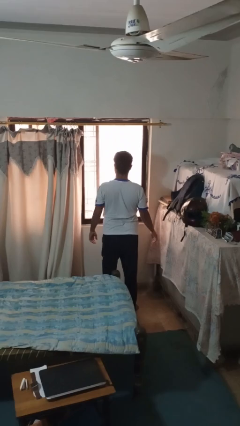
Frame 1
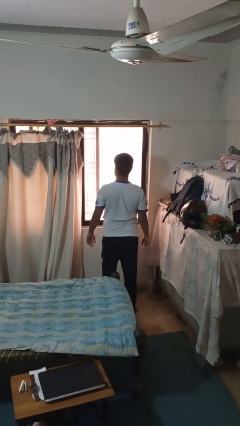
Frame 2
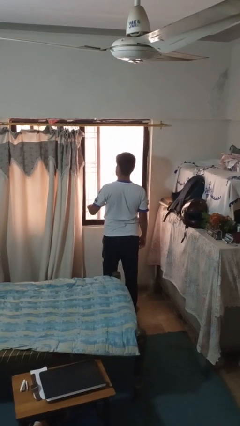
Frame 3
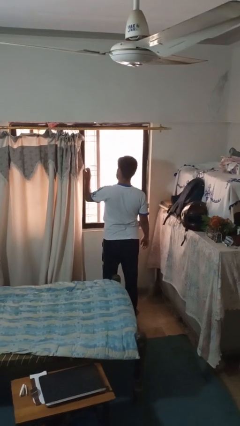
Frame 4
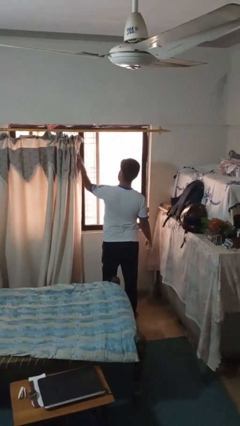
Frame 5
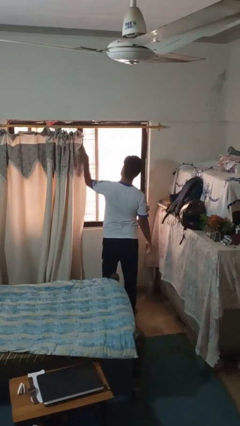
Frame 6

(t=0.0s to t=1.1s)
person closes curtains

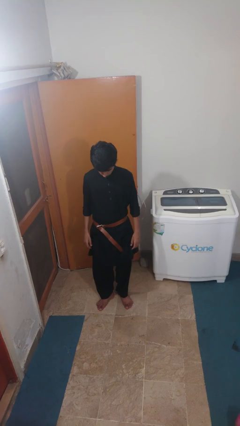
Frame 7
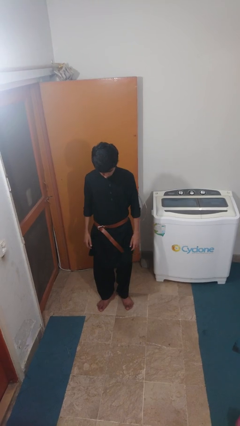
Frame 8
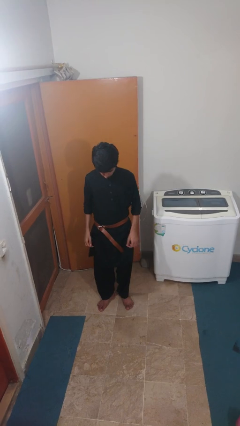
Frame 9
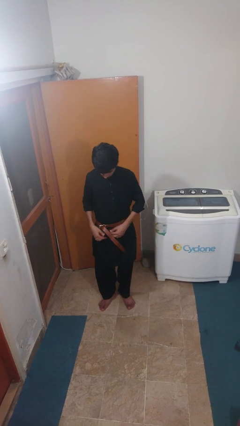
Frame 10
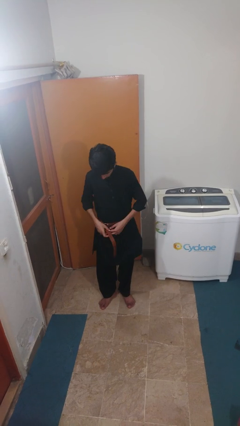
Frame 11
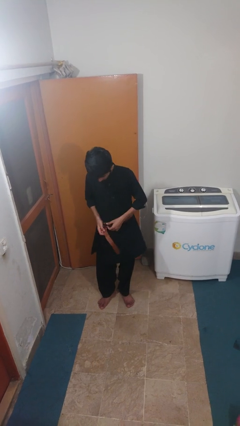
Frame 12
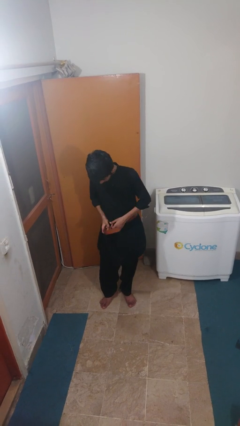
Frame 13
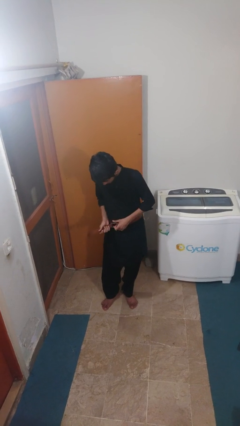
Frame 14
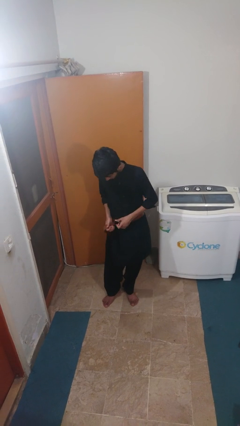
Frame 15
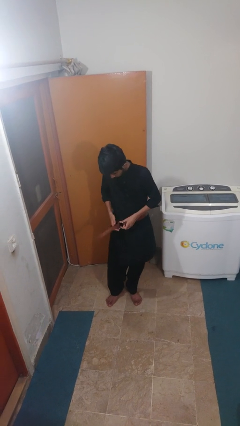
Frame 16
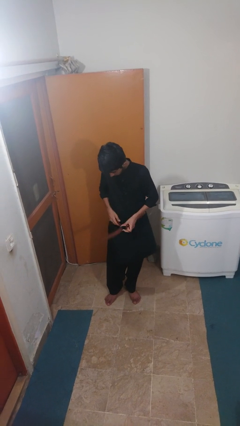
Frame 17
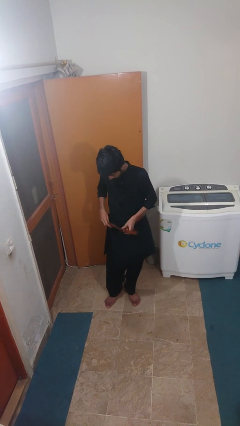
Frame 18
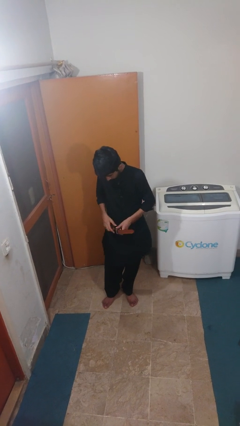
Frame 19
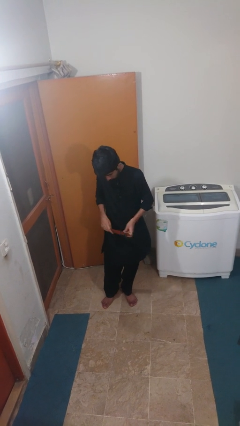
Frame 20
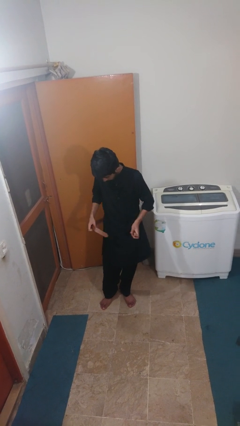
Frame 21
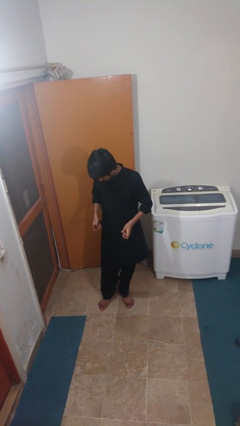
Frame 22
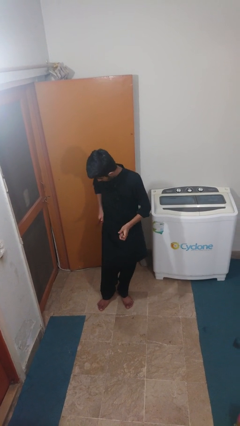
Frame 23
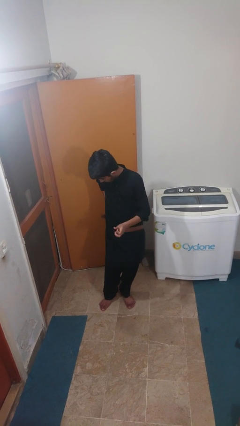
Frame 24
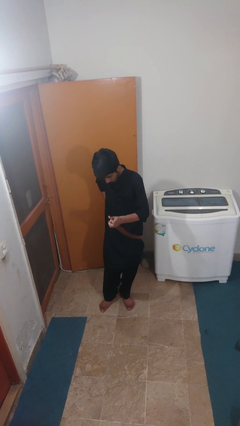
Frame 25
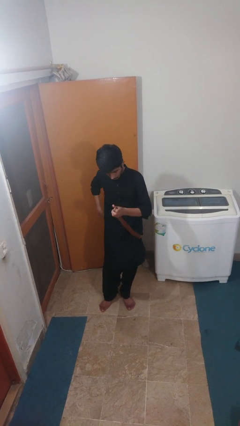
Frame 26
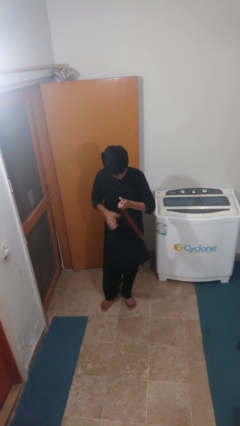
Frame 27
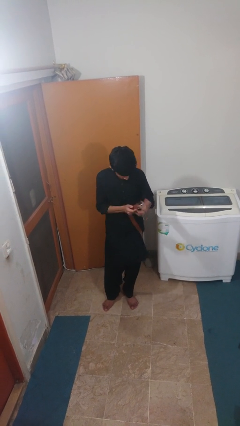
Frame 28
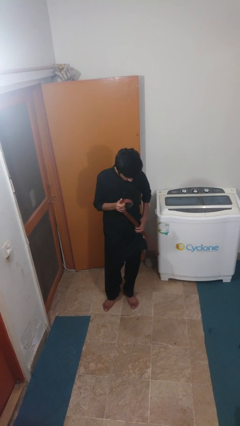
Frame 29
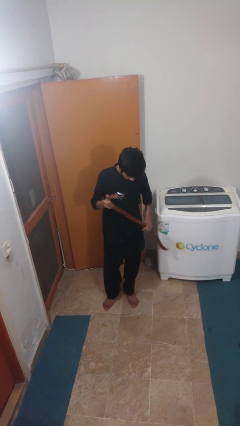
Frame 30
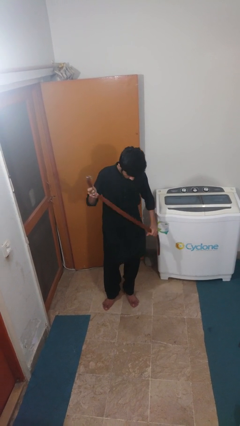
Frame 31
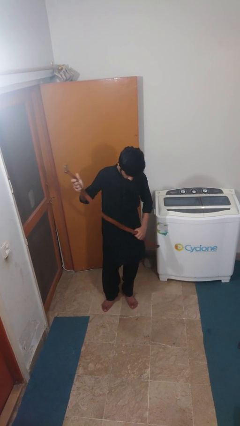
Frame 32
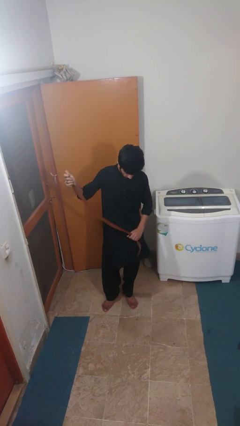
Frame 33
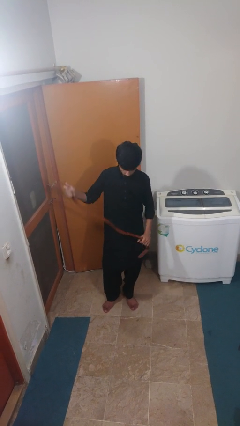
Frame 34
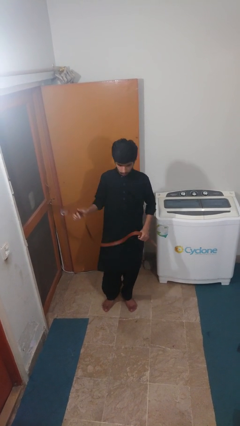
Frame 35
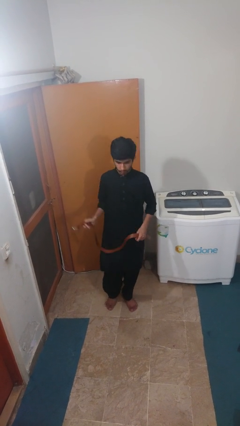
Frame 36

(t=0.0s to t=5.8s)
person takes off belt

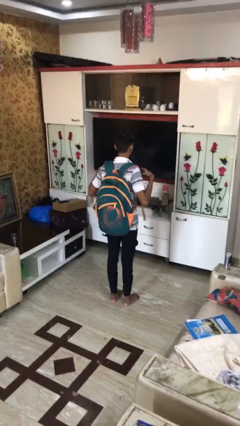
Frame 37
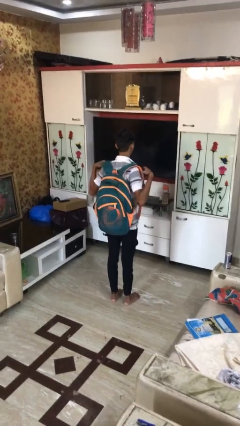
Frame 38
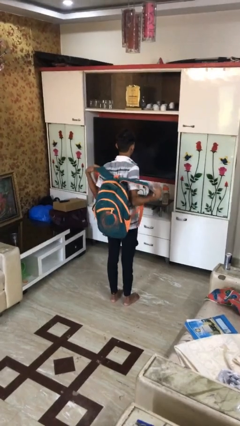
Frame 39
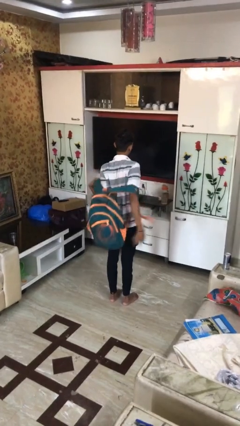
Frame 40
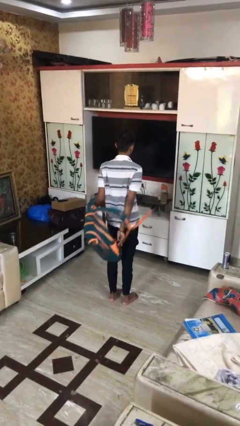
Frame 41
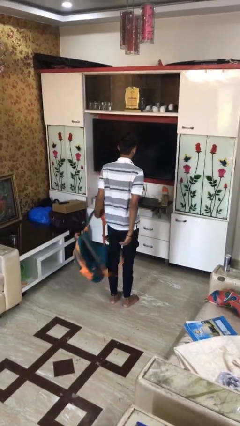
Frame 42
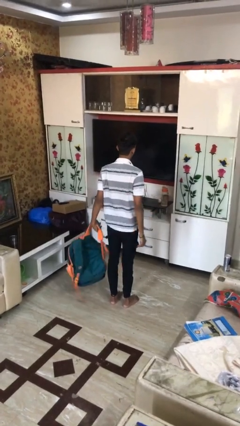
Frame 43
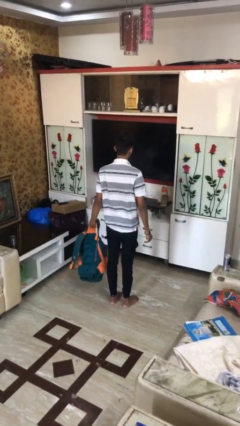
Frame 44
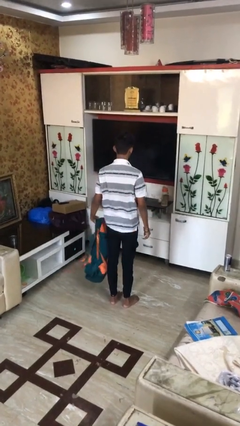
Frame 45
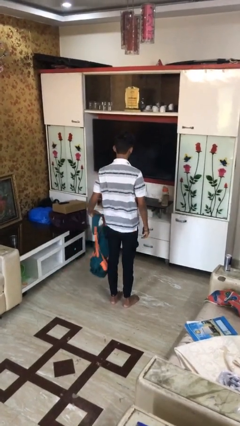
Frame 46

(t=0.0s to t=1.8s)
person takes off backpack

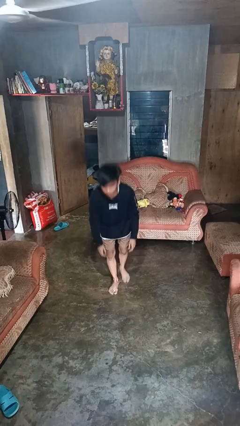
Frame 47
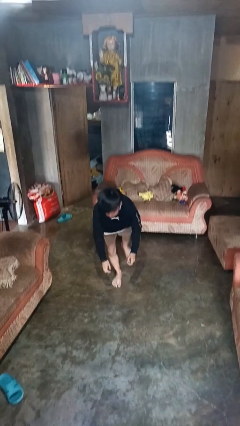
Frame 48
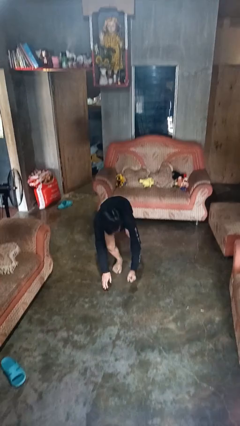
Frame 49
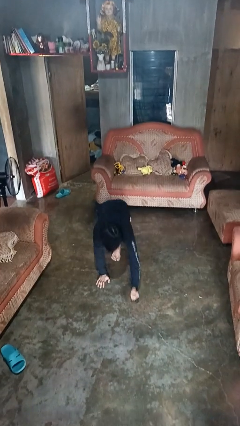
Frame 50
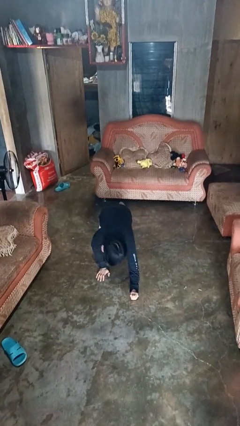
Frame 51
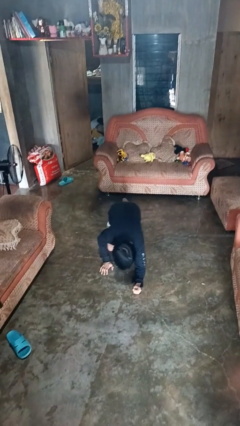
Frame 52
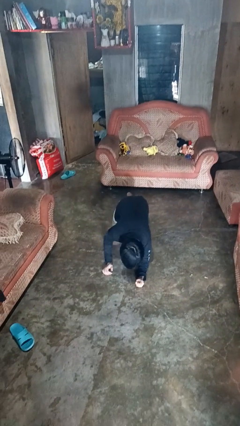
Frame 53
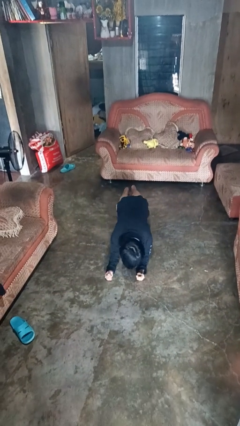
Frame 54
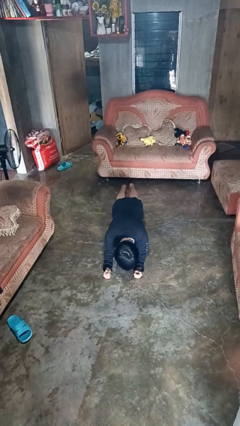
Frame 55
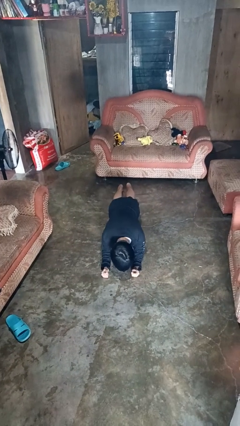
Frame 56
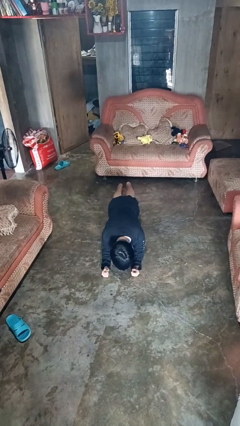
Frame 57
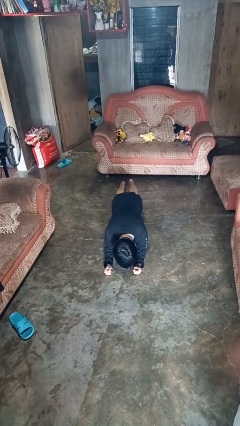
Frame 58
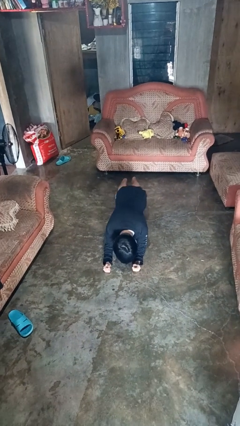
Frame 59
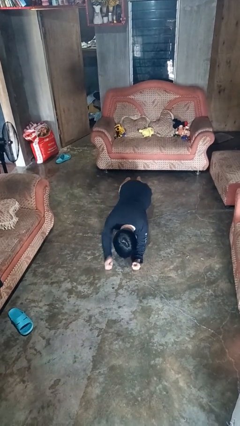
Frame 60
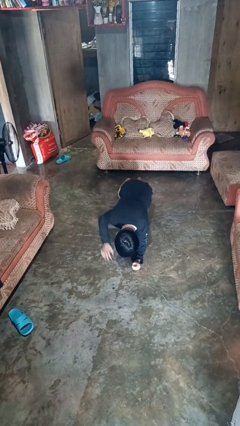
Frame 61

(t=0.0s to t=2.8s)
person exercises with plank

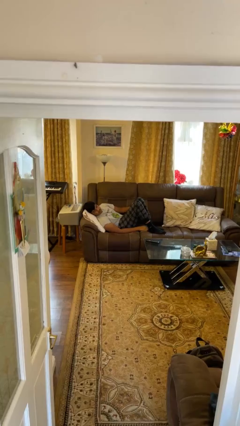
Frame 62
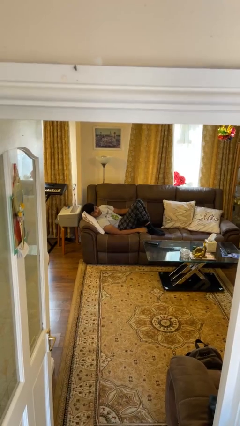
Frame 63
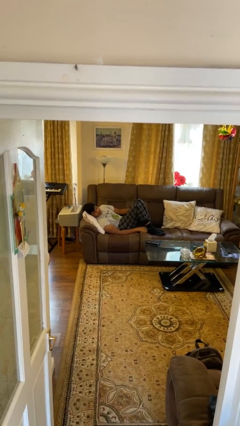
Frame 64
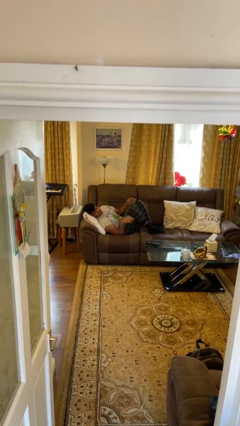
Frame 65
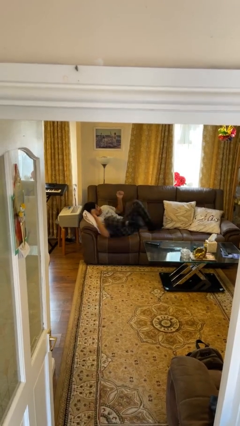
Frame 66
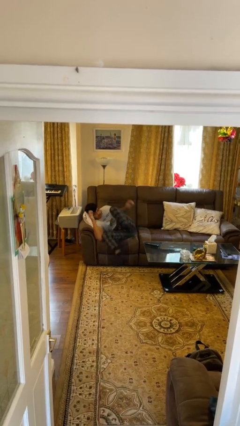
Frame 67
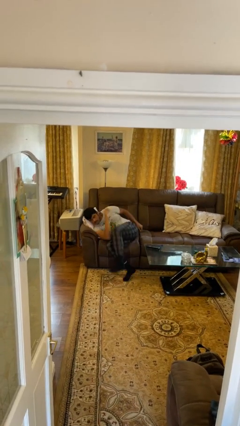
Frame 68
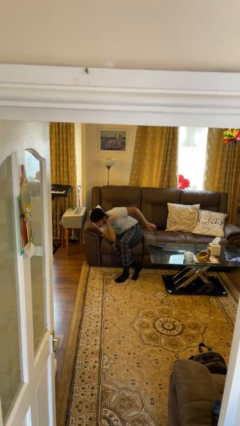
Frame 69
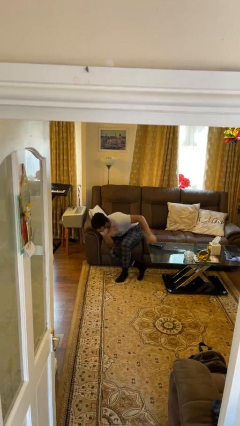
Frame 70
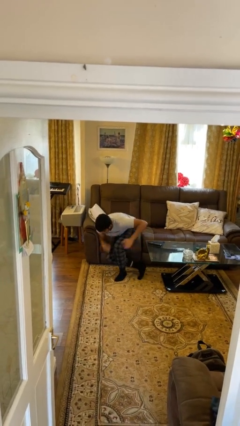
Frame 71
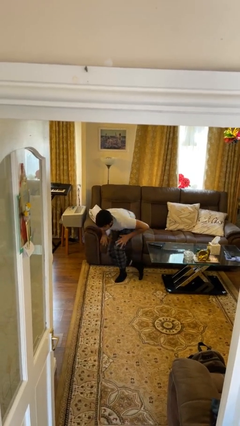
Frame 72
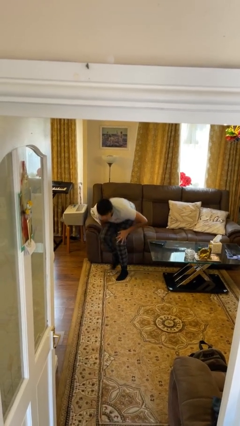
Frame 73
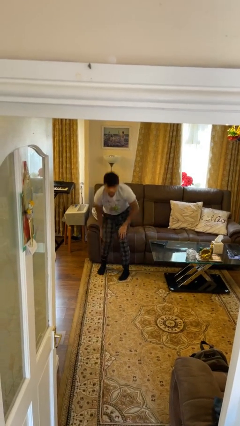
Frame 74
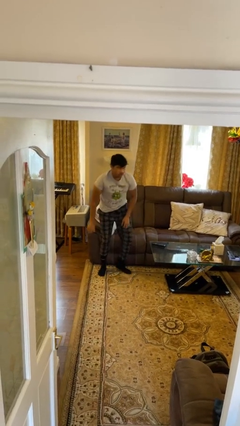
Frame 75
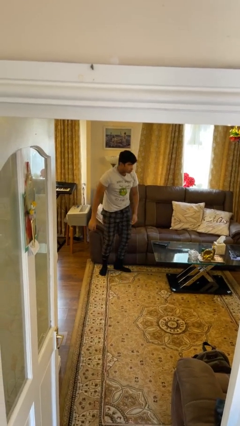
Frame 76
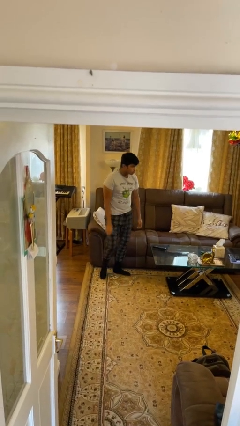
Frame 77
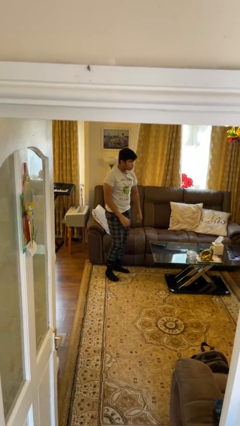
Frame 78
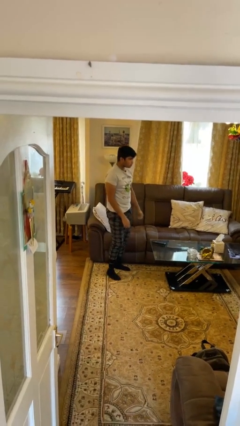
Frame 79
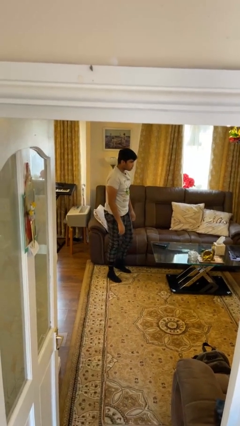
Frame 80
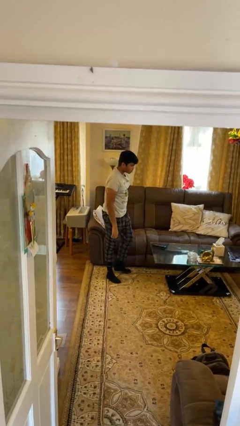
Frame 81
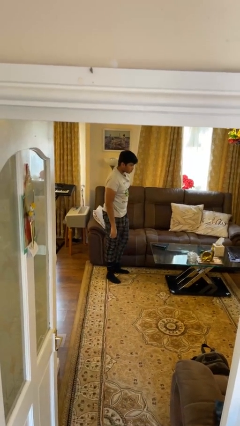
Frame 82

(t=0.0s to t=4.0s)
person stands up

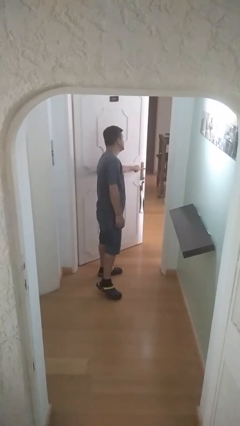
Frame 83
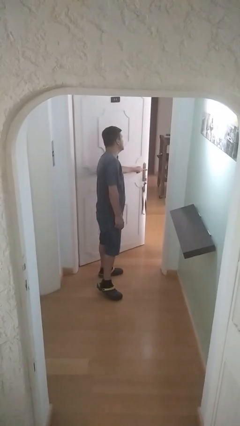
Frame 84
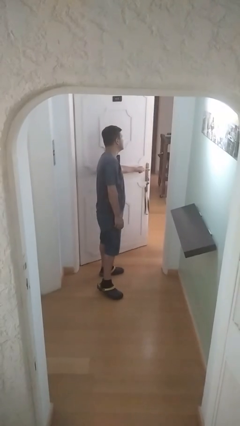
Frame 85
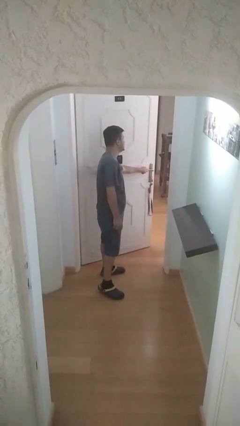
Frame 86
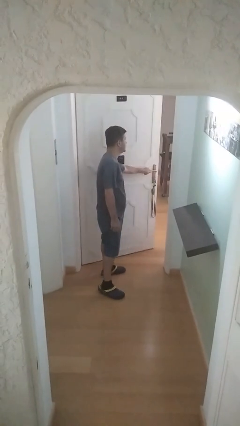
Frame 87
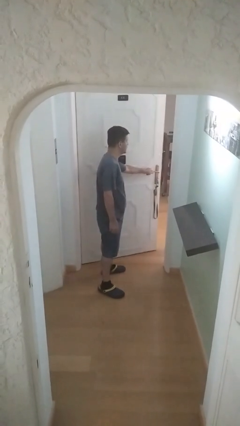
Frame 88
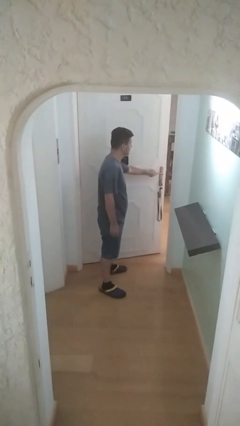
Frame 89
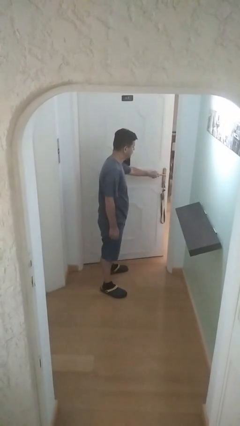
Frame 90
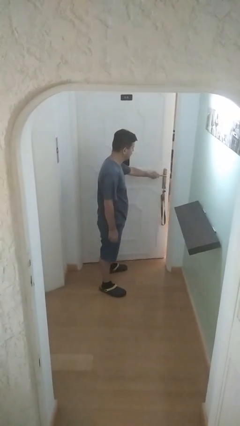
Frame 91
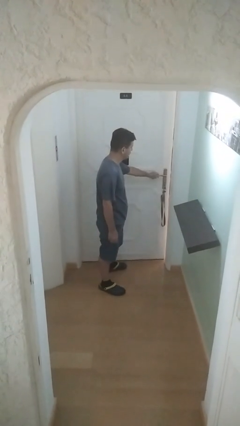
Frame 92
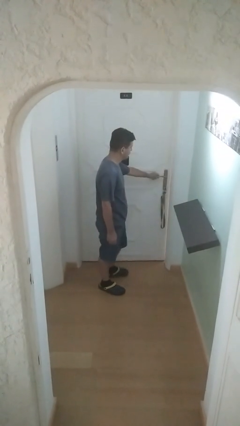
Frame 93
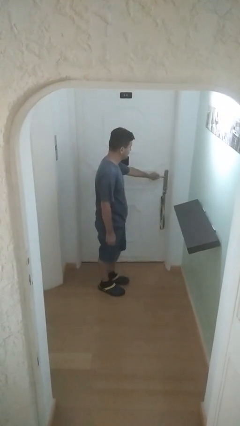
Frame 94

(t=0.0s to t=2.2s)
person closes facility door
